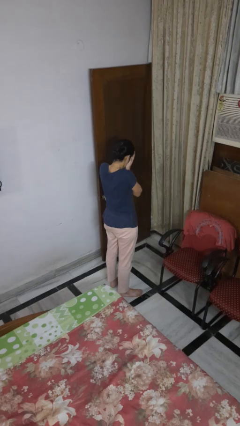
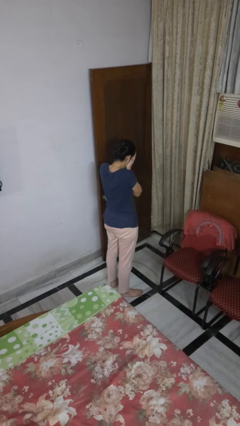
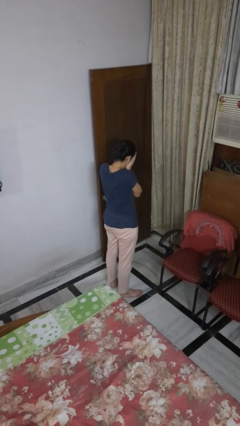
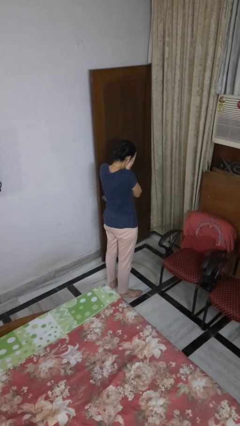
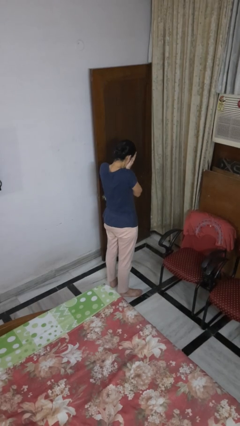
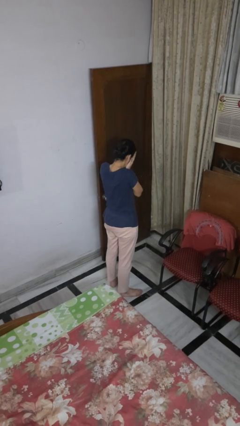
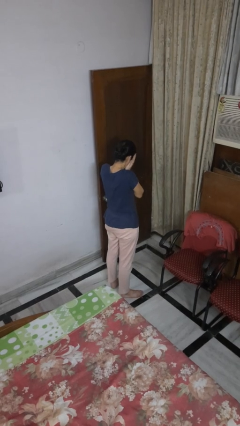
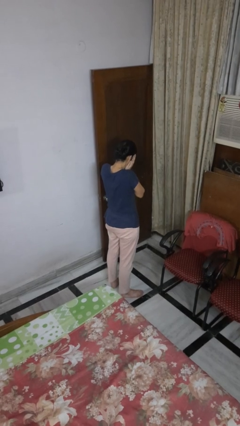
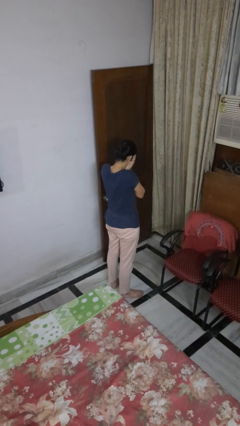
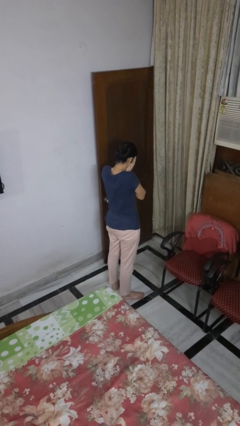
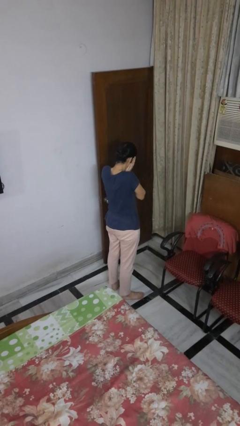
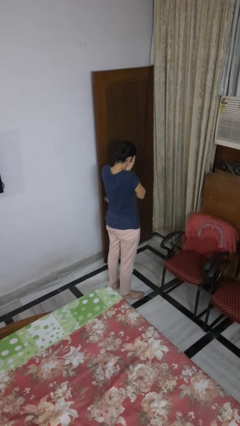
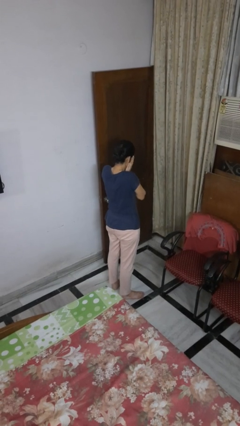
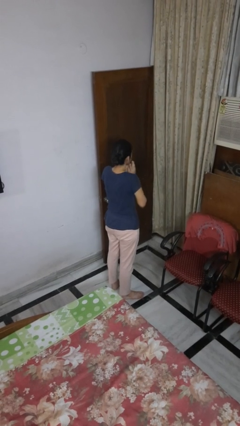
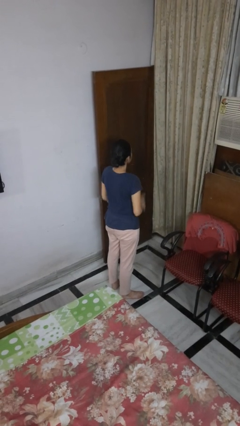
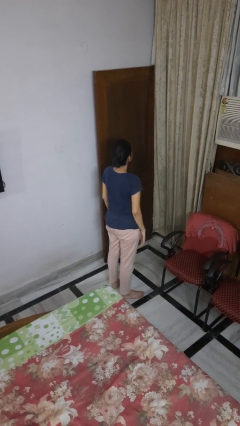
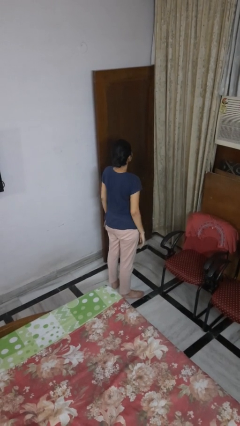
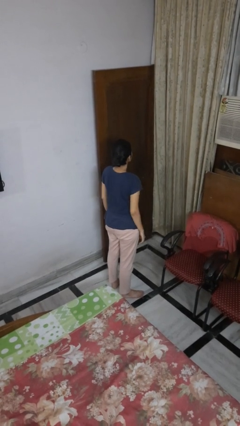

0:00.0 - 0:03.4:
person covers face with hands

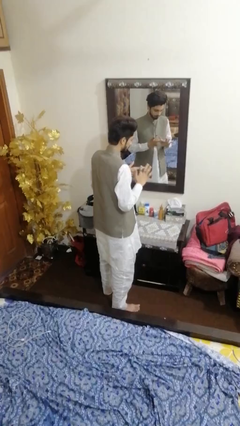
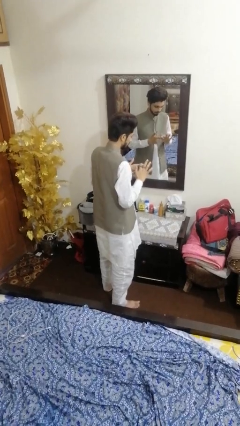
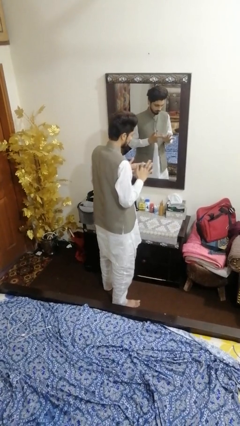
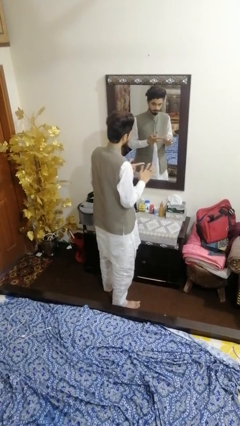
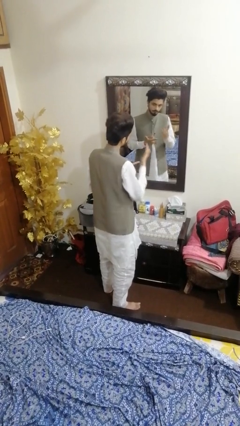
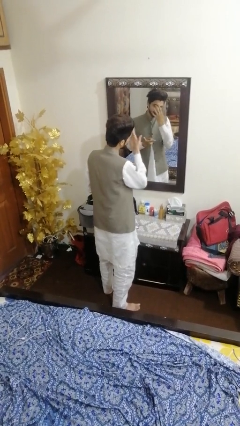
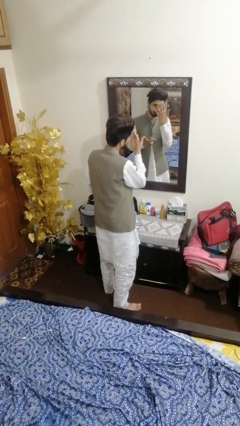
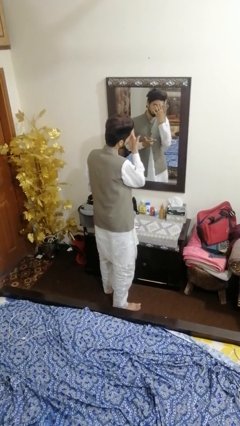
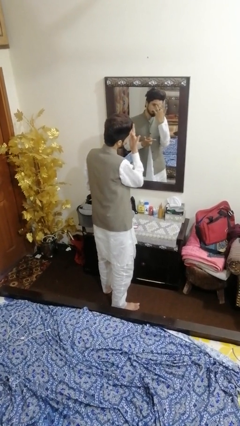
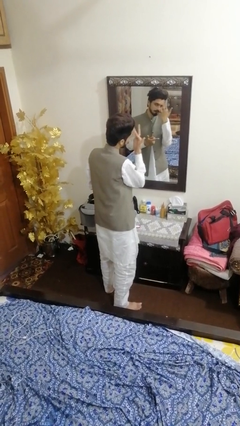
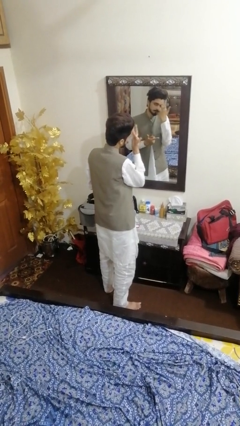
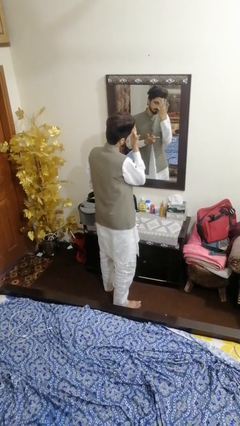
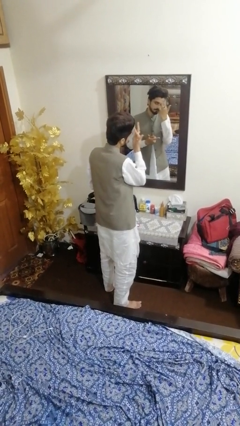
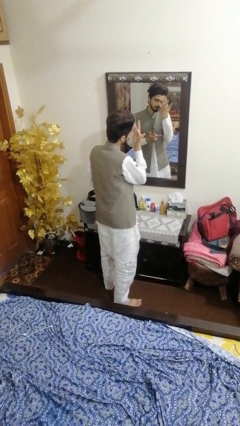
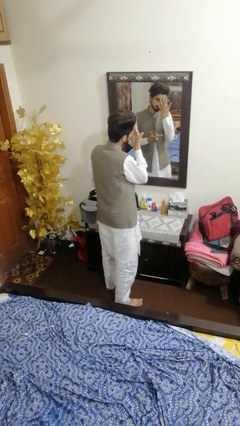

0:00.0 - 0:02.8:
person applies foundation makeup

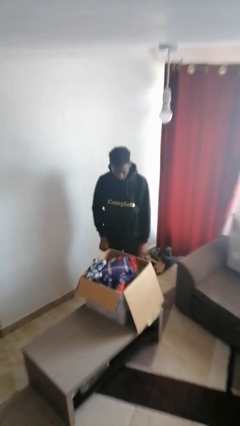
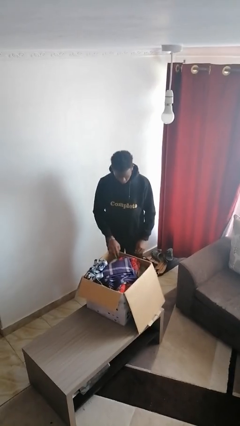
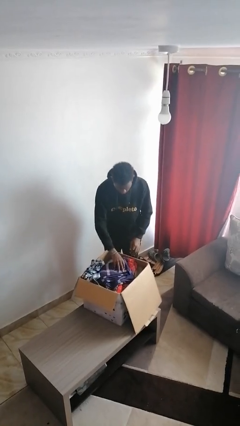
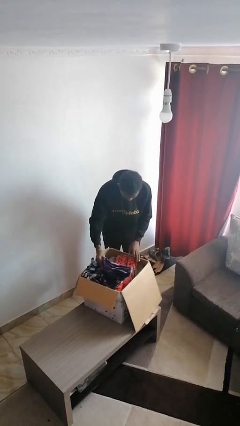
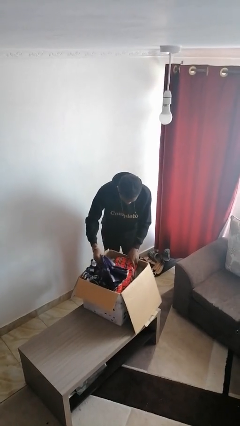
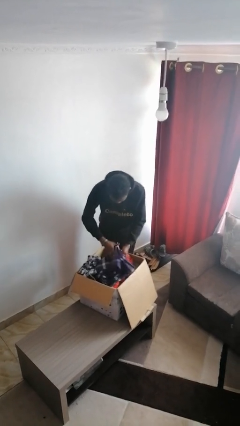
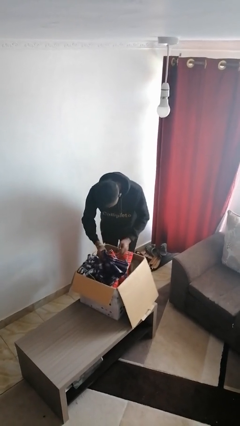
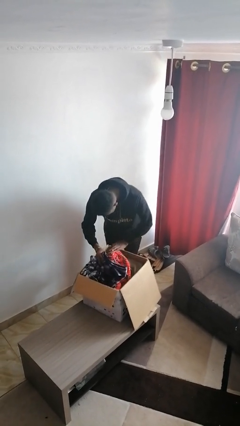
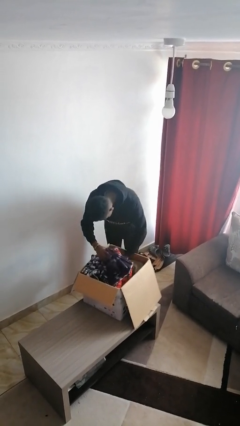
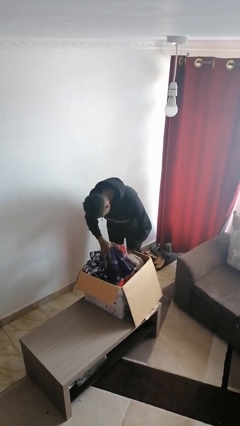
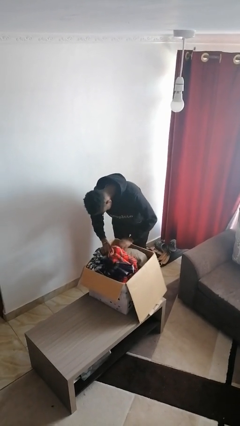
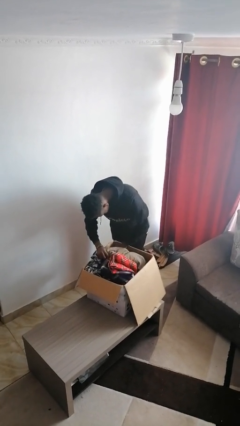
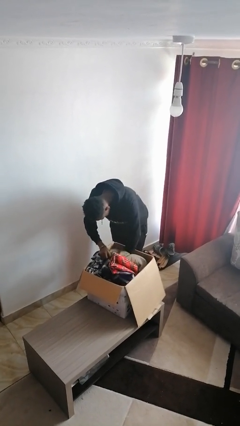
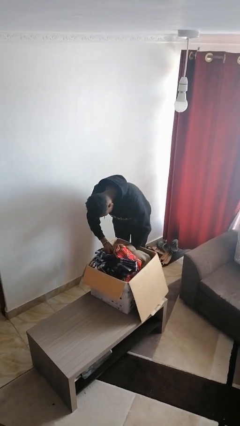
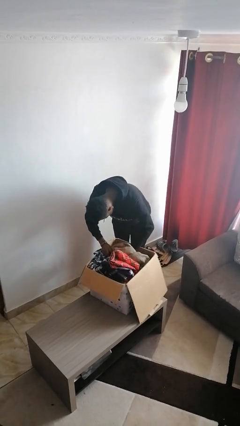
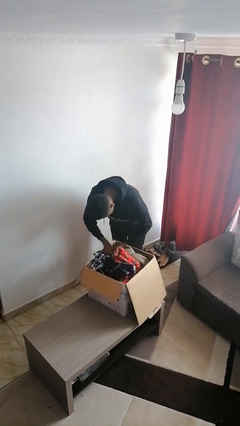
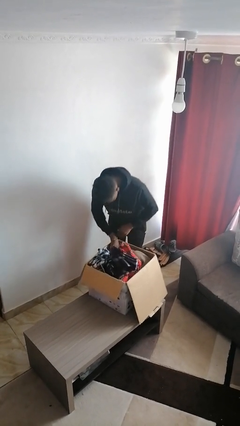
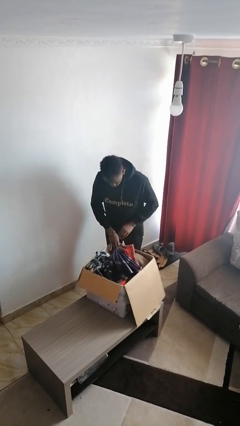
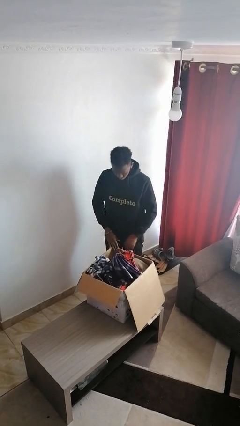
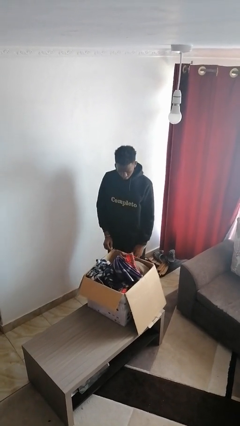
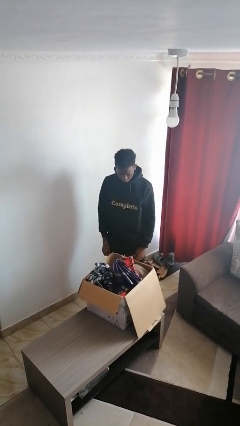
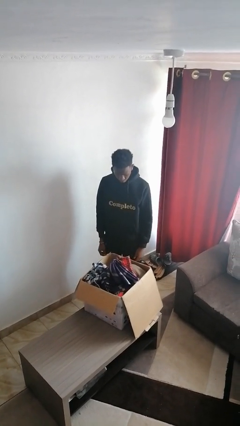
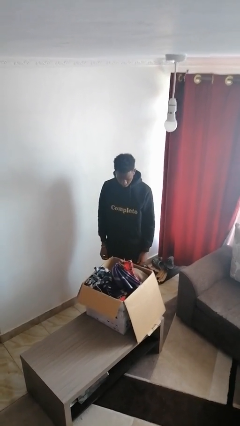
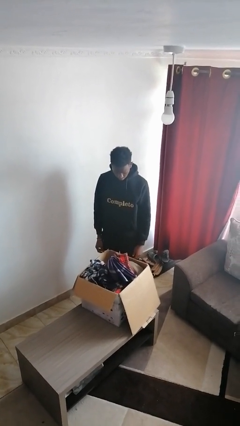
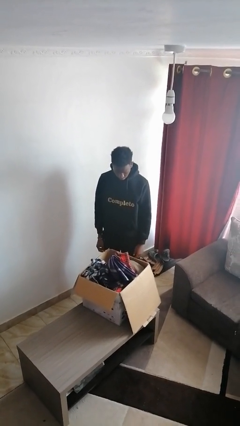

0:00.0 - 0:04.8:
person searches in box

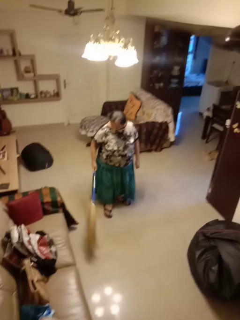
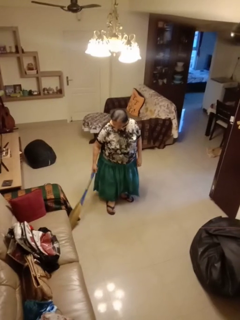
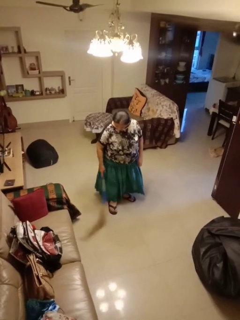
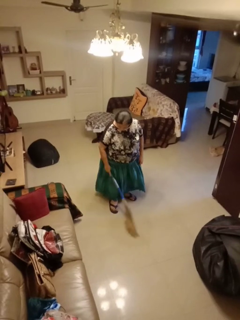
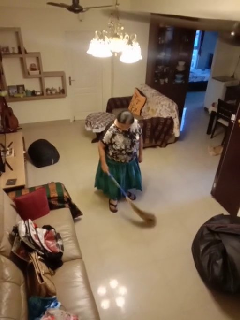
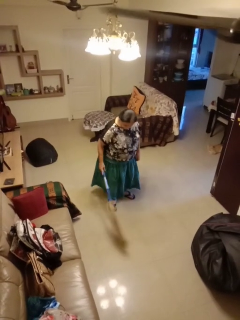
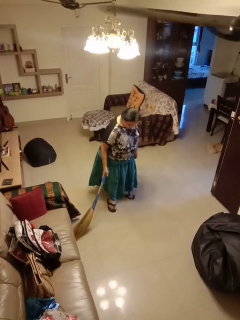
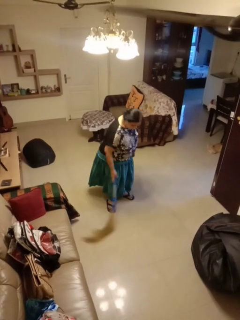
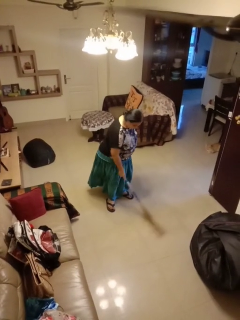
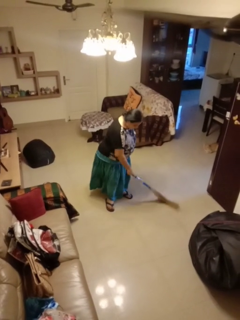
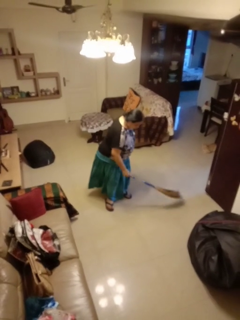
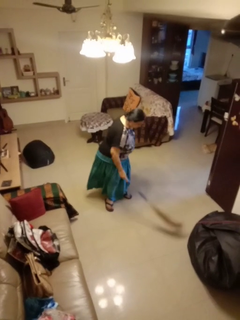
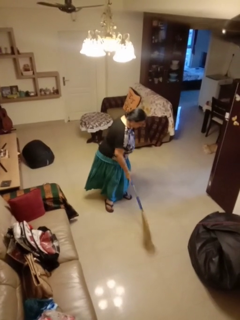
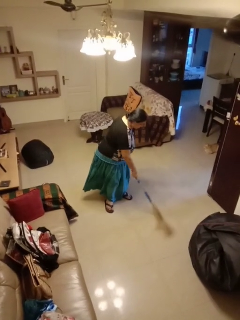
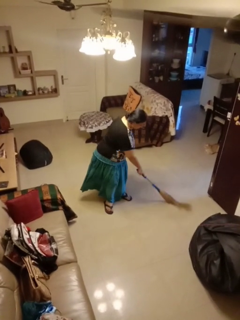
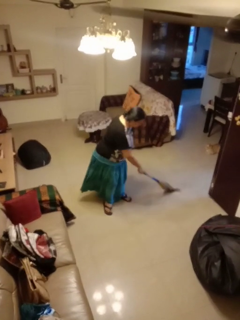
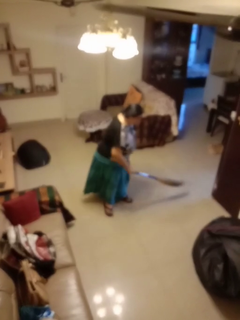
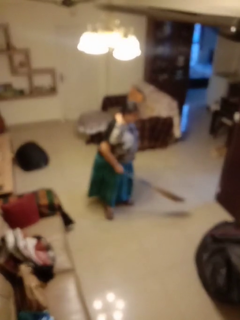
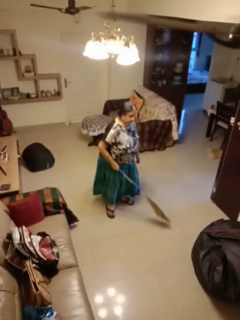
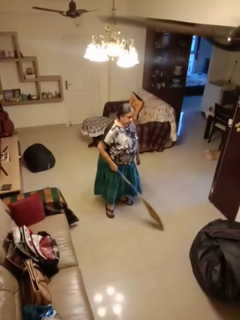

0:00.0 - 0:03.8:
person sweeps floor

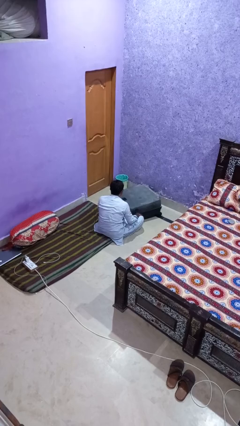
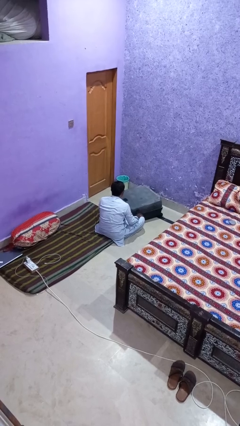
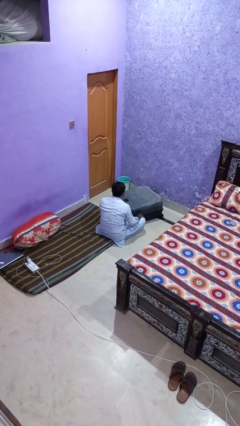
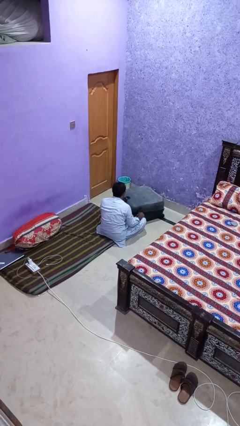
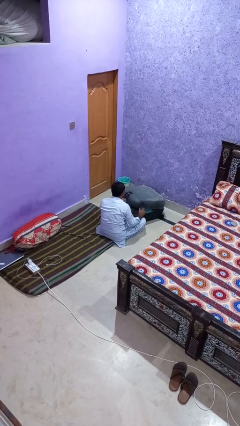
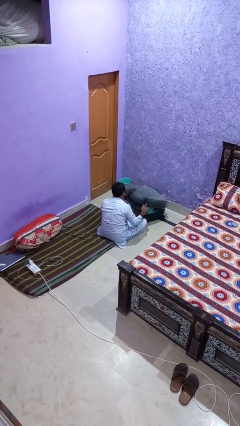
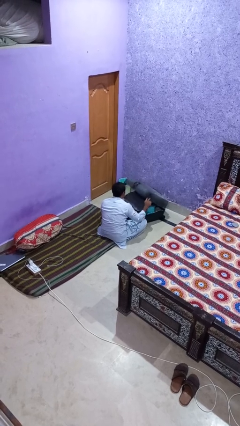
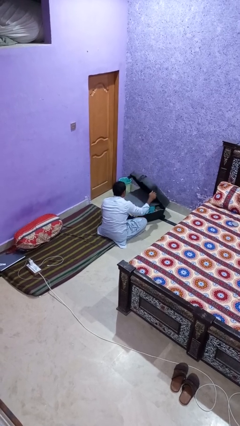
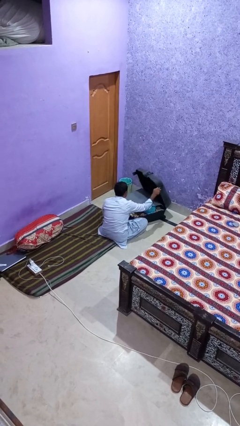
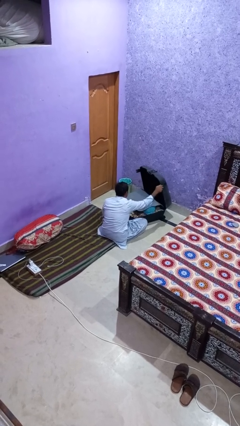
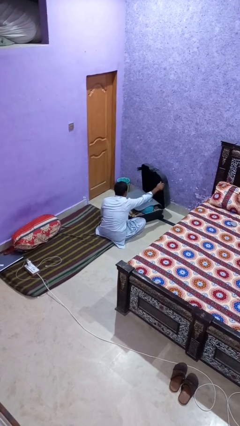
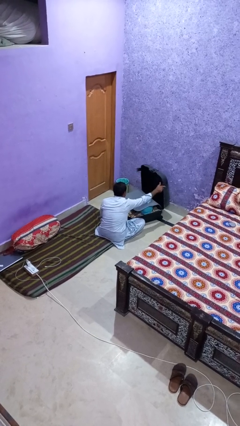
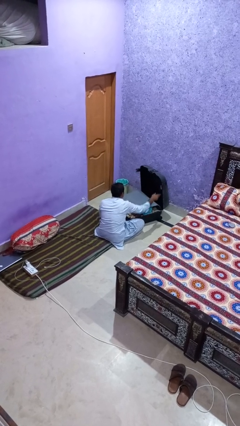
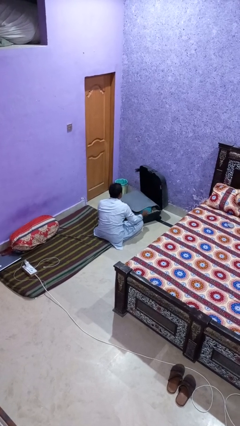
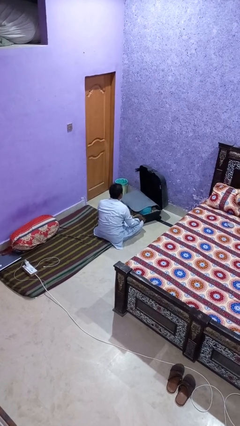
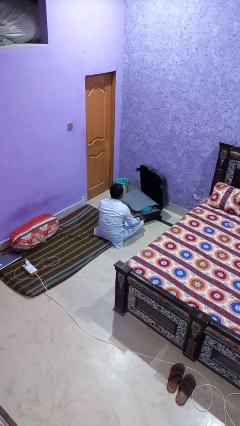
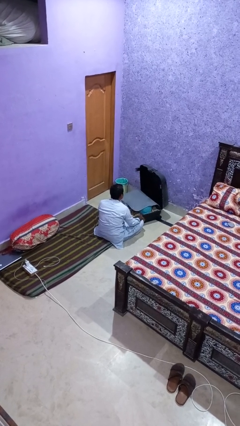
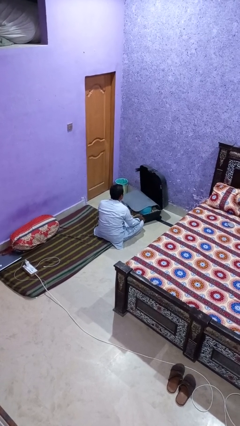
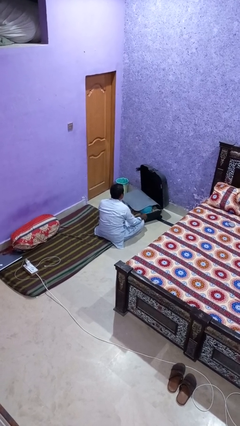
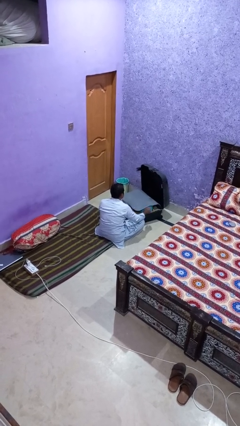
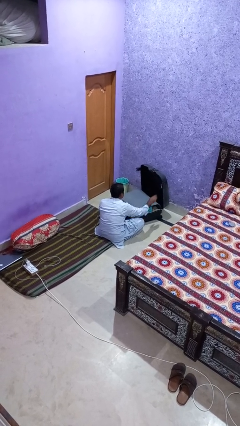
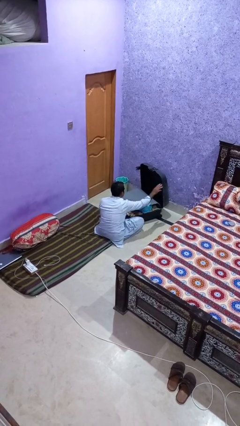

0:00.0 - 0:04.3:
person opens suitcase
